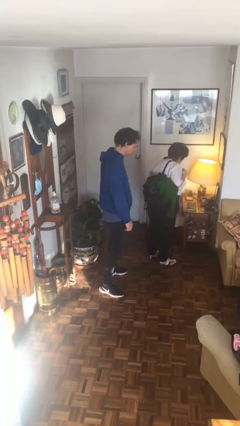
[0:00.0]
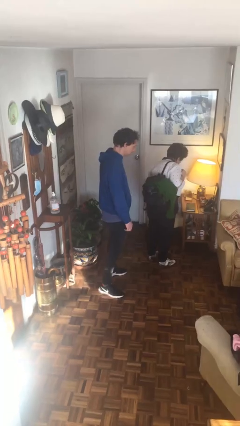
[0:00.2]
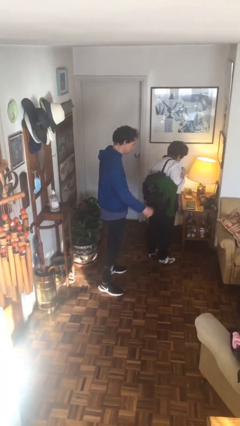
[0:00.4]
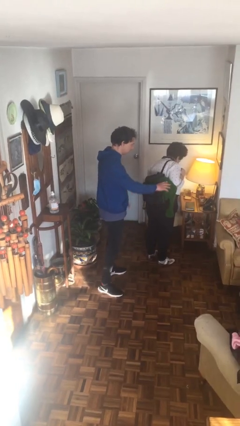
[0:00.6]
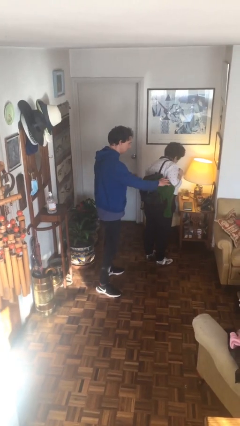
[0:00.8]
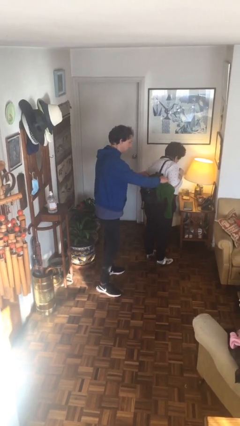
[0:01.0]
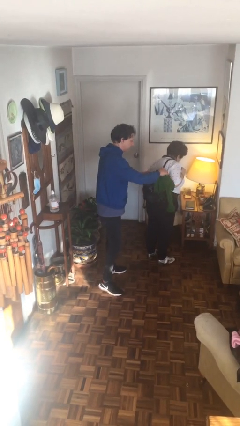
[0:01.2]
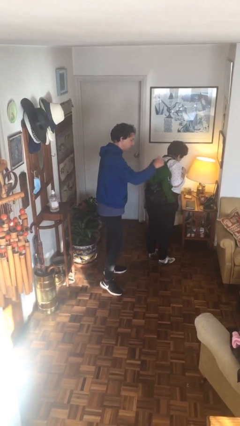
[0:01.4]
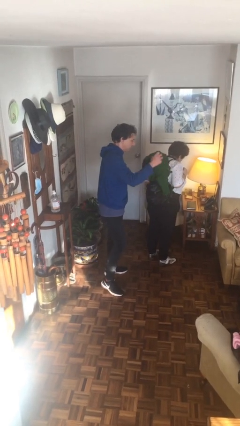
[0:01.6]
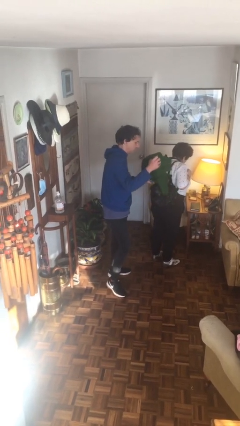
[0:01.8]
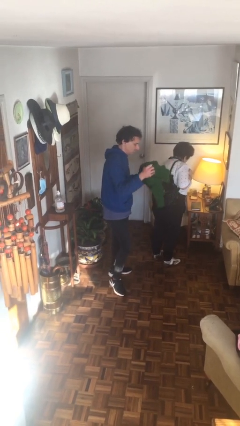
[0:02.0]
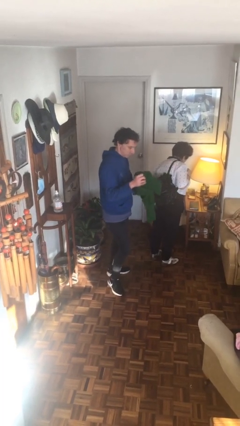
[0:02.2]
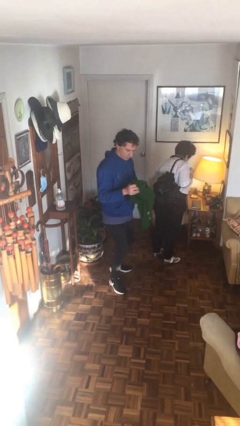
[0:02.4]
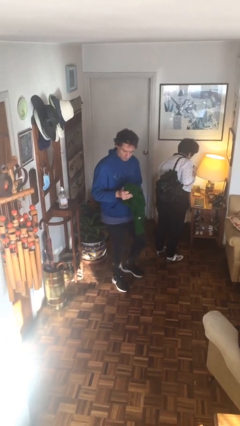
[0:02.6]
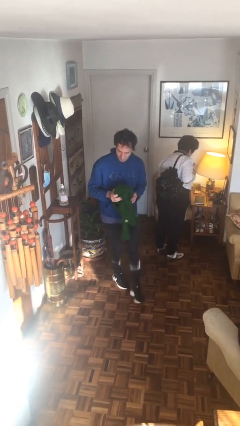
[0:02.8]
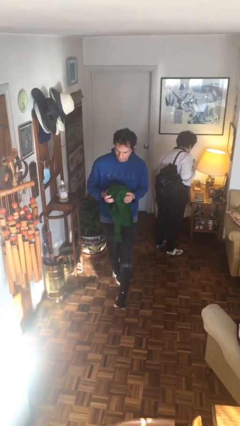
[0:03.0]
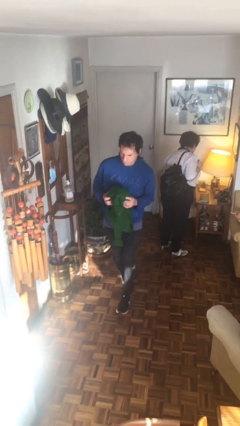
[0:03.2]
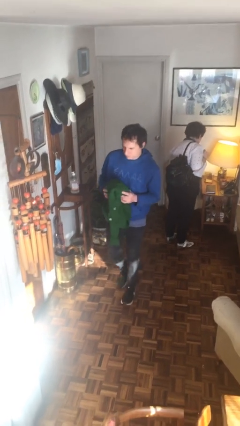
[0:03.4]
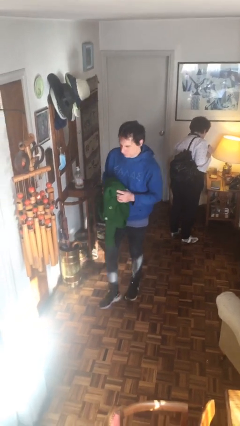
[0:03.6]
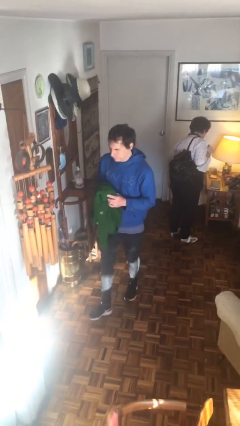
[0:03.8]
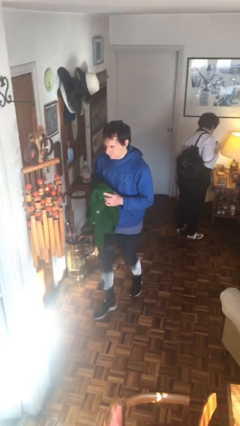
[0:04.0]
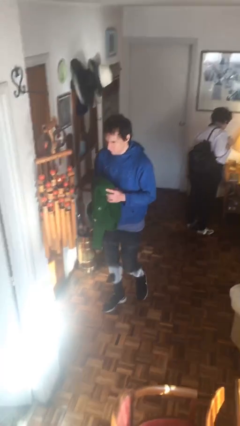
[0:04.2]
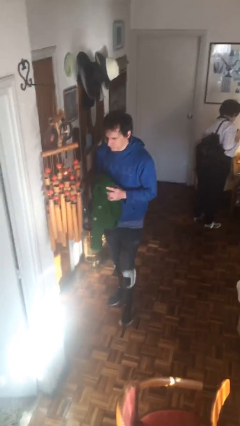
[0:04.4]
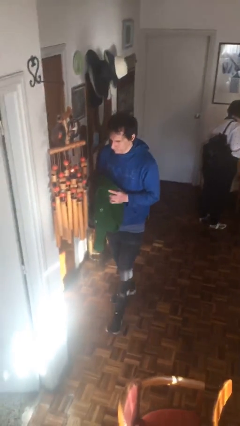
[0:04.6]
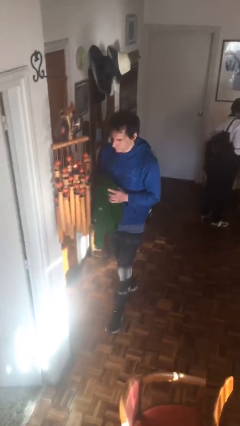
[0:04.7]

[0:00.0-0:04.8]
person steals object from person

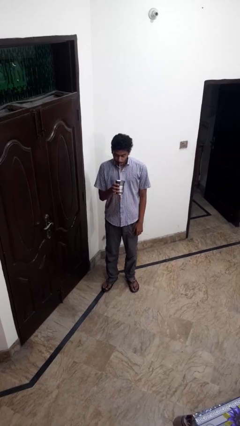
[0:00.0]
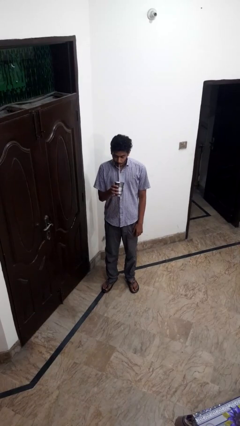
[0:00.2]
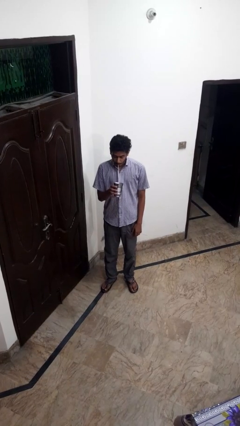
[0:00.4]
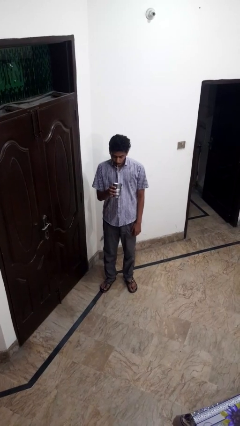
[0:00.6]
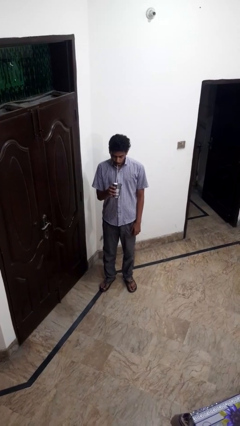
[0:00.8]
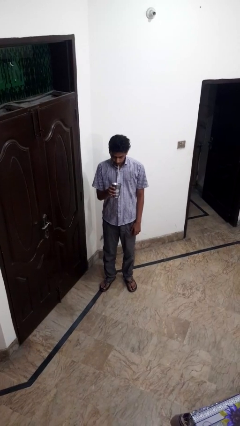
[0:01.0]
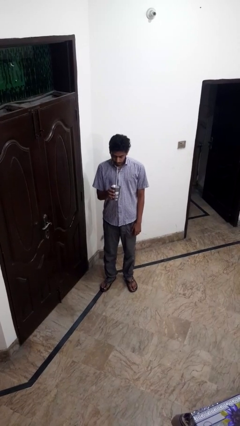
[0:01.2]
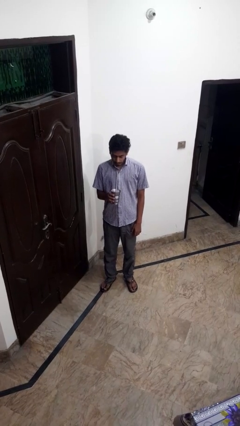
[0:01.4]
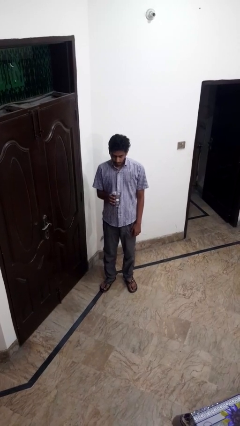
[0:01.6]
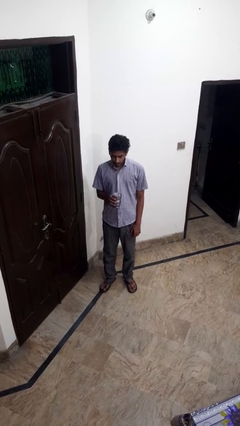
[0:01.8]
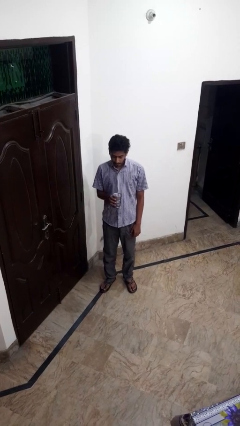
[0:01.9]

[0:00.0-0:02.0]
person drinks from straw

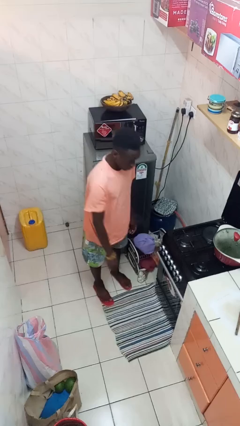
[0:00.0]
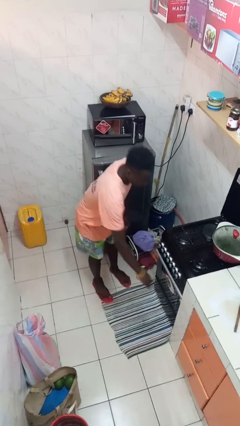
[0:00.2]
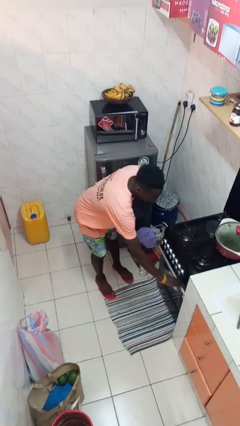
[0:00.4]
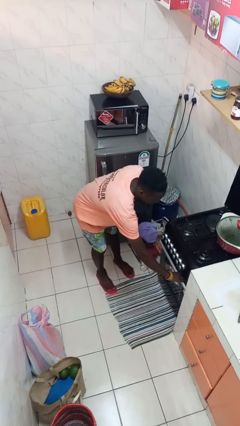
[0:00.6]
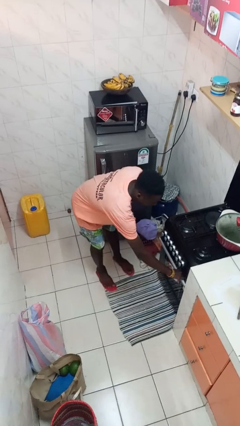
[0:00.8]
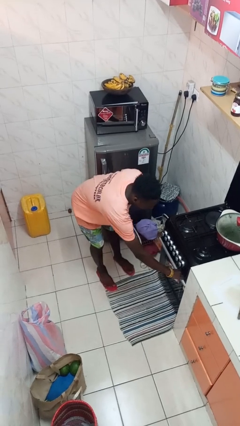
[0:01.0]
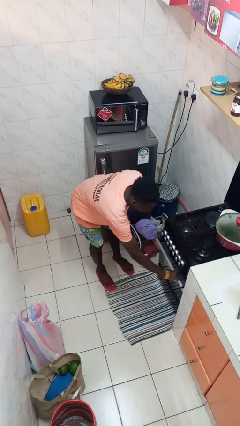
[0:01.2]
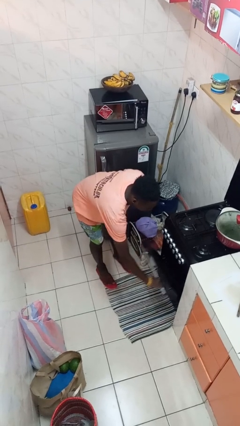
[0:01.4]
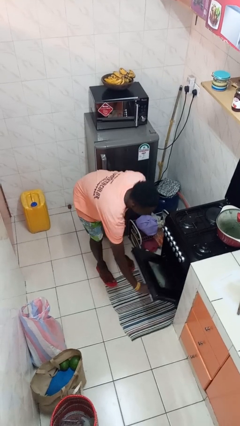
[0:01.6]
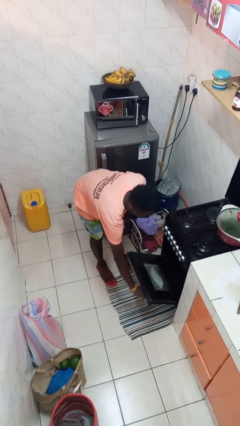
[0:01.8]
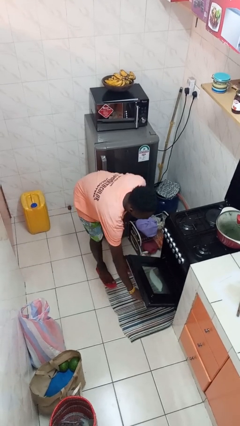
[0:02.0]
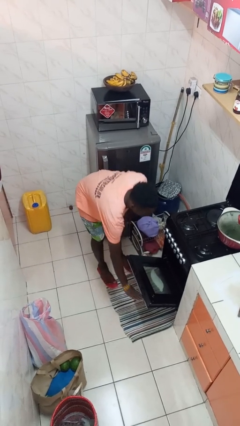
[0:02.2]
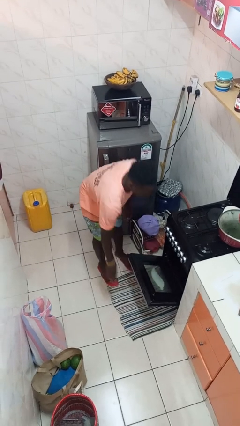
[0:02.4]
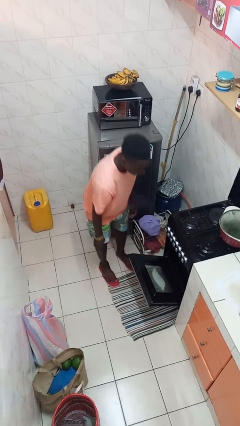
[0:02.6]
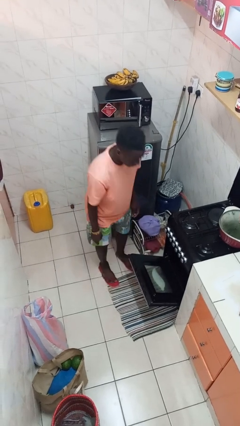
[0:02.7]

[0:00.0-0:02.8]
person opens oven door

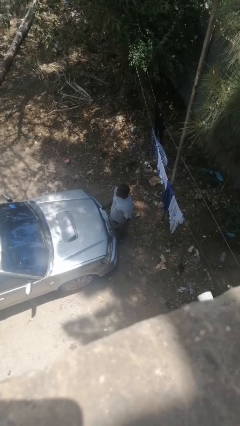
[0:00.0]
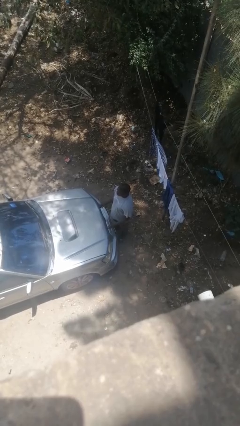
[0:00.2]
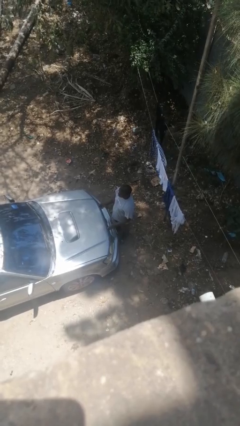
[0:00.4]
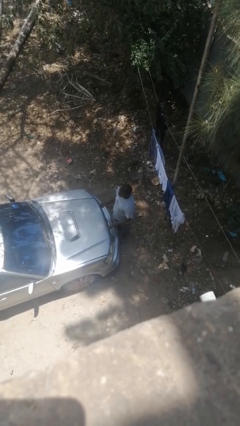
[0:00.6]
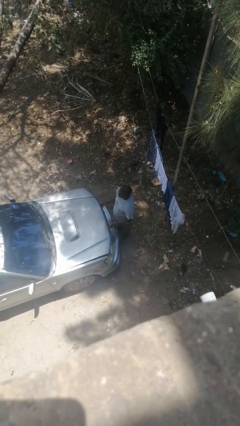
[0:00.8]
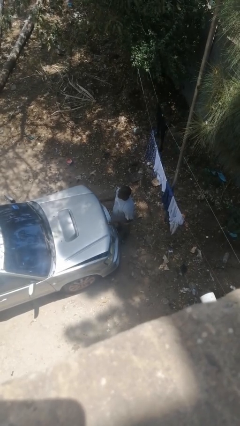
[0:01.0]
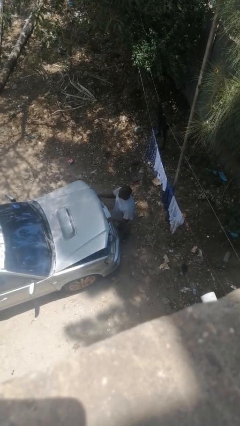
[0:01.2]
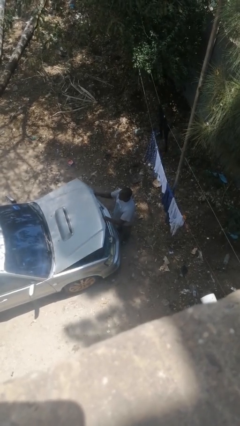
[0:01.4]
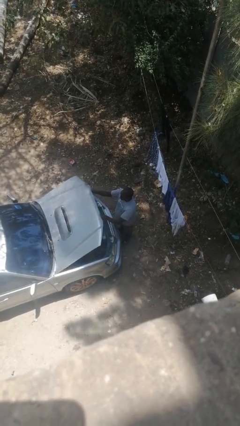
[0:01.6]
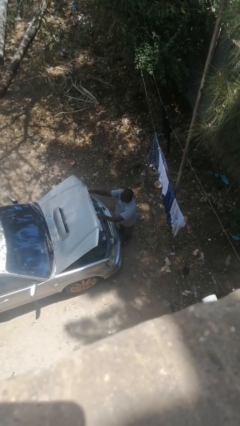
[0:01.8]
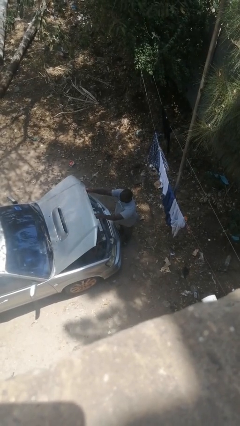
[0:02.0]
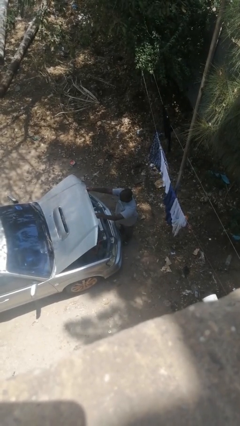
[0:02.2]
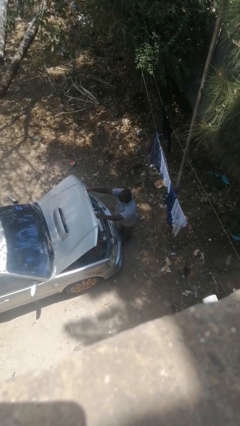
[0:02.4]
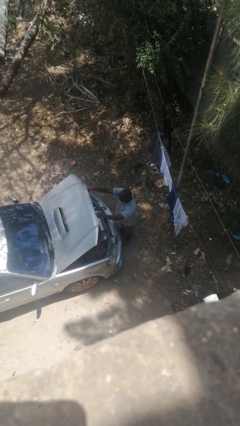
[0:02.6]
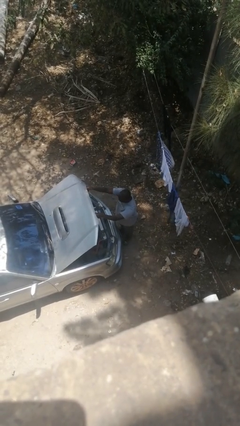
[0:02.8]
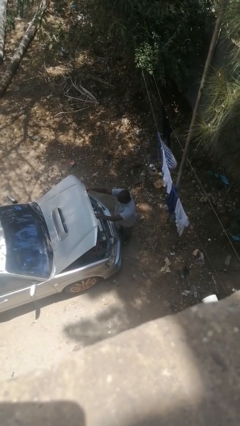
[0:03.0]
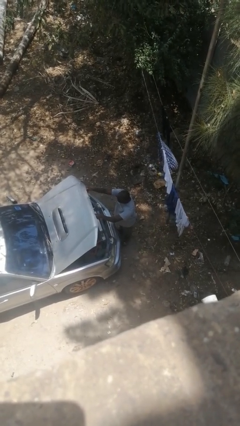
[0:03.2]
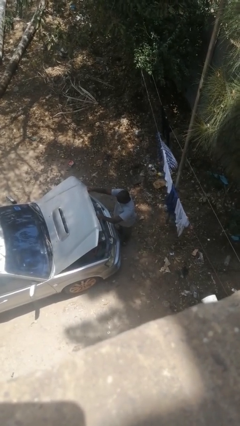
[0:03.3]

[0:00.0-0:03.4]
person opens car hood

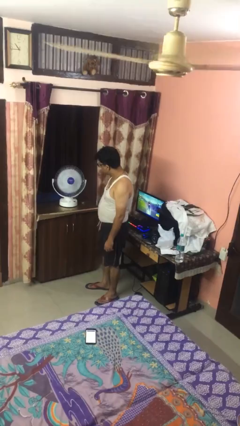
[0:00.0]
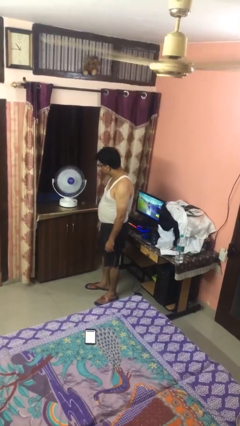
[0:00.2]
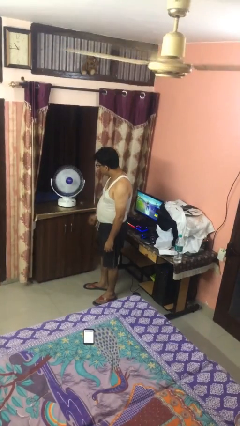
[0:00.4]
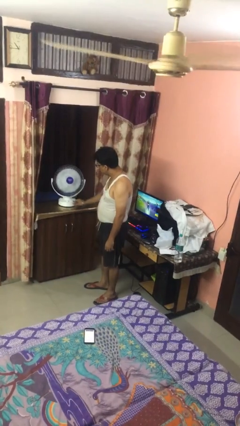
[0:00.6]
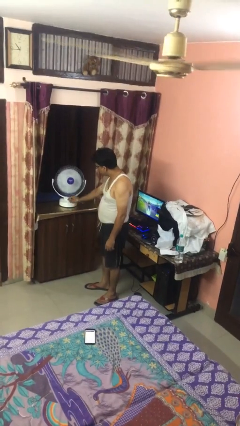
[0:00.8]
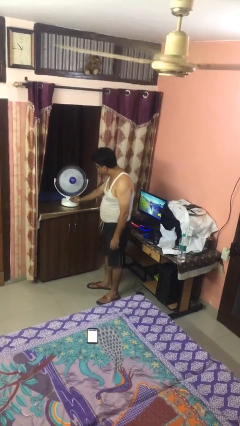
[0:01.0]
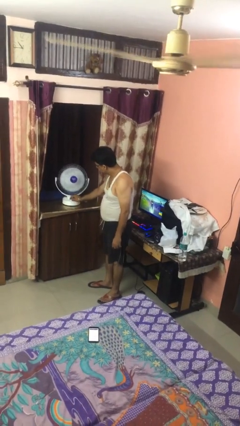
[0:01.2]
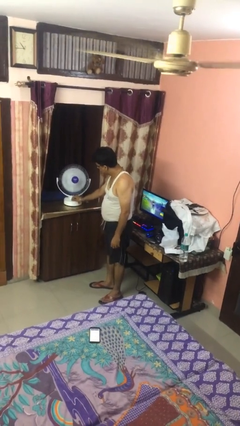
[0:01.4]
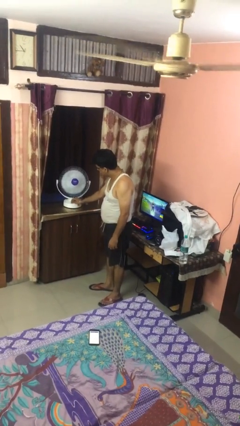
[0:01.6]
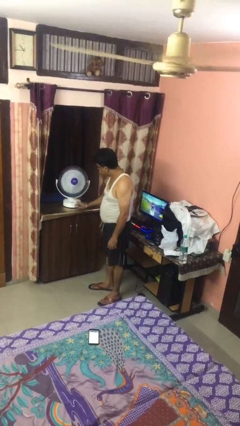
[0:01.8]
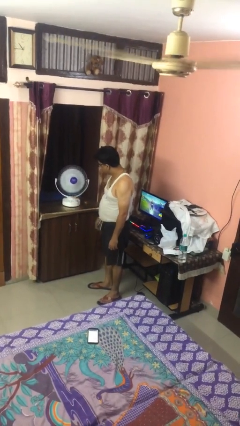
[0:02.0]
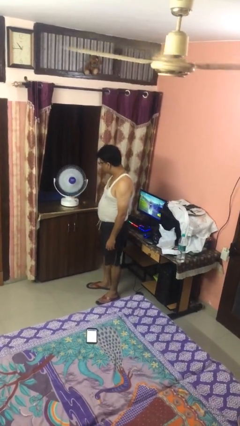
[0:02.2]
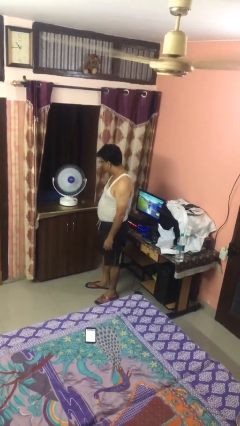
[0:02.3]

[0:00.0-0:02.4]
person turns off fan

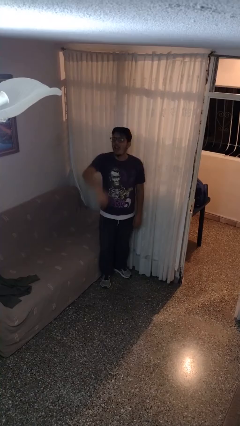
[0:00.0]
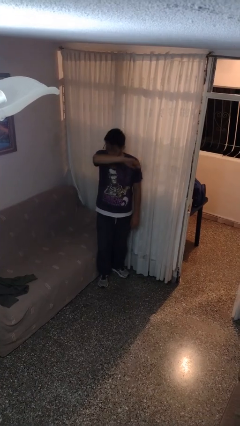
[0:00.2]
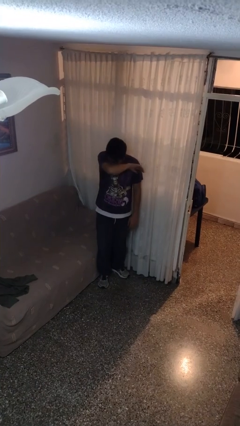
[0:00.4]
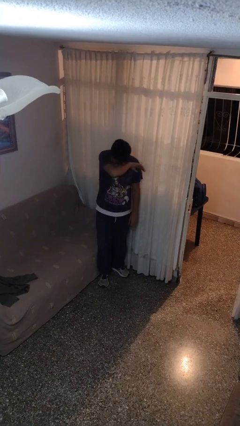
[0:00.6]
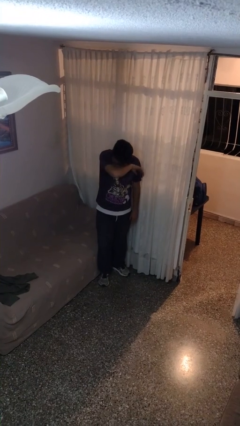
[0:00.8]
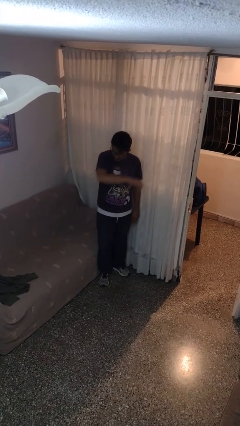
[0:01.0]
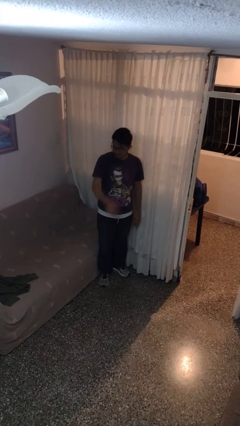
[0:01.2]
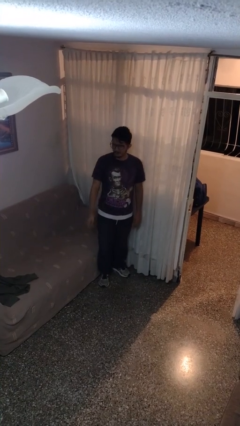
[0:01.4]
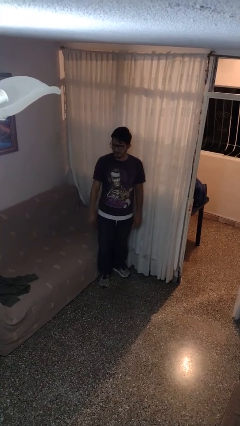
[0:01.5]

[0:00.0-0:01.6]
person sneezes into arm

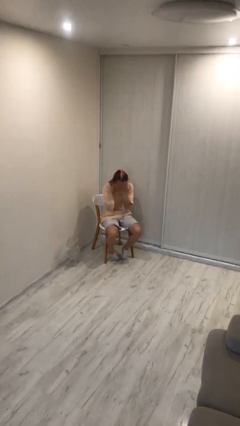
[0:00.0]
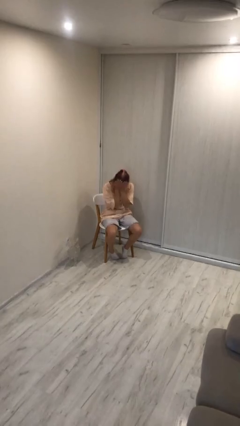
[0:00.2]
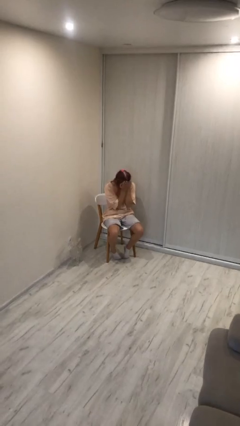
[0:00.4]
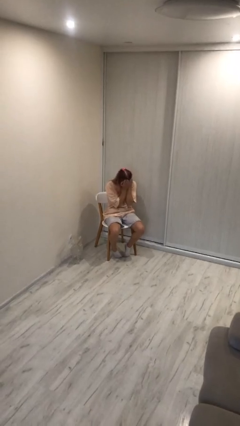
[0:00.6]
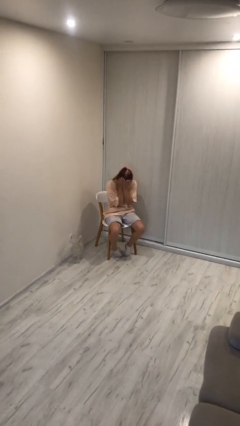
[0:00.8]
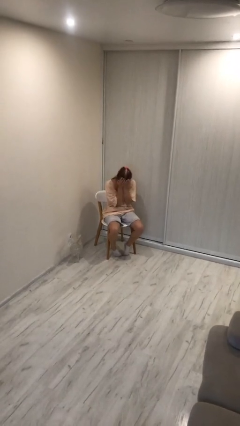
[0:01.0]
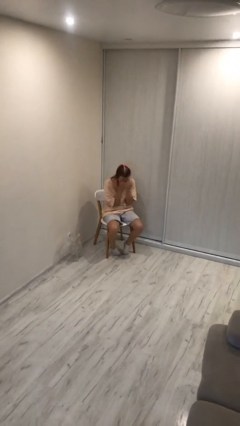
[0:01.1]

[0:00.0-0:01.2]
person covers face with hands
